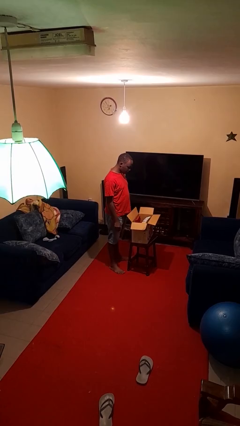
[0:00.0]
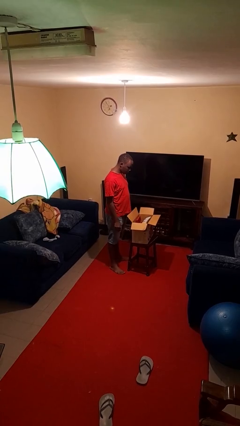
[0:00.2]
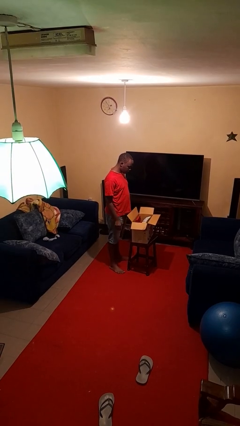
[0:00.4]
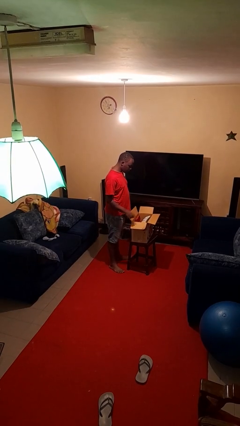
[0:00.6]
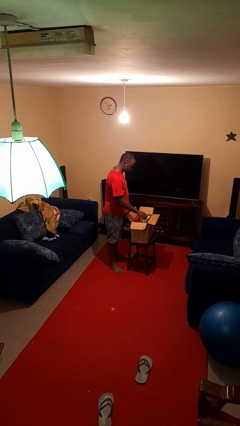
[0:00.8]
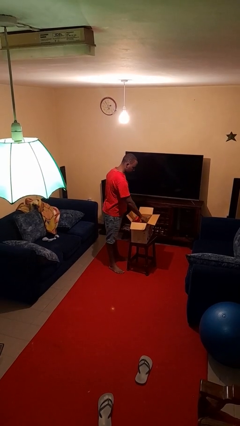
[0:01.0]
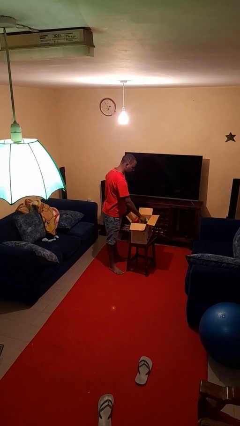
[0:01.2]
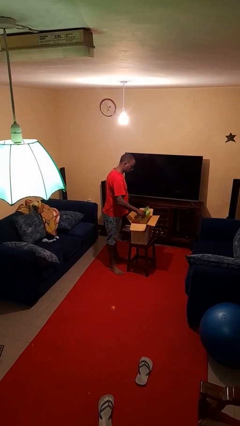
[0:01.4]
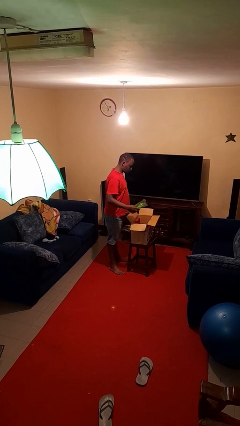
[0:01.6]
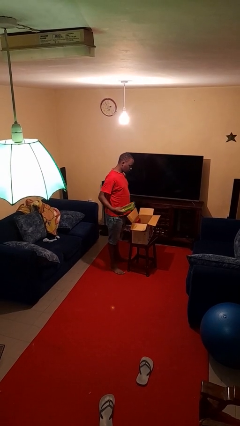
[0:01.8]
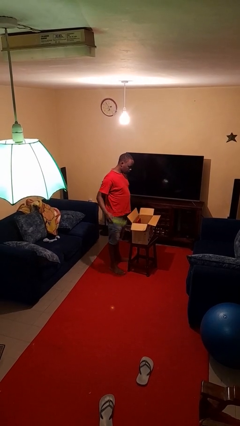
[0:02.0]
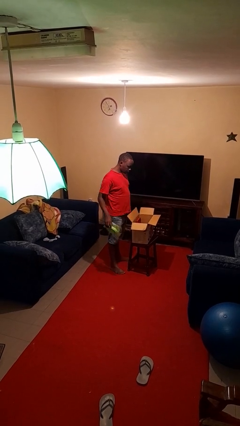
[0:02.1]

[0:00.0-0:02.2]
person takes object from box

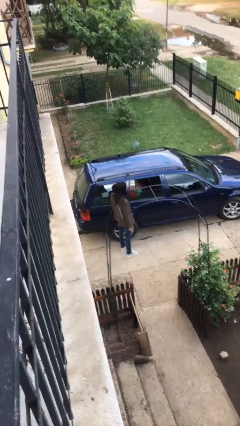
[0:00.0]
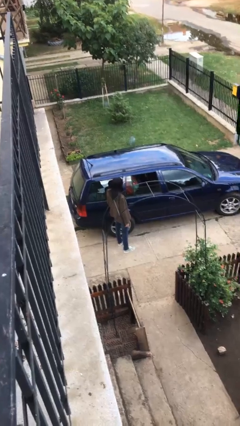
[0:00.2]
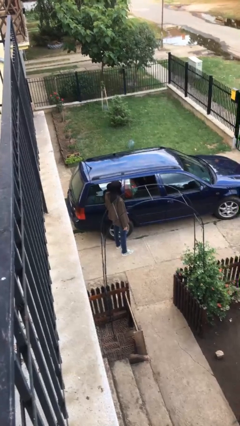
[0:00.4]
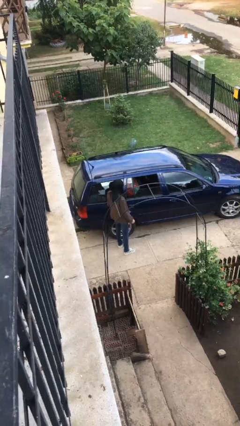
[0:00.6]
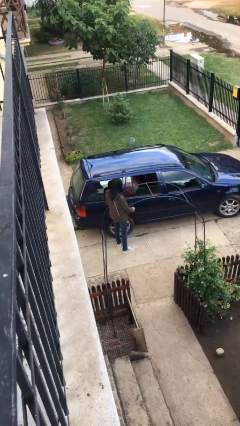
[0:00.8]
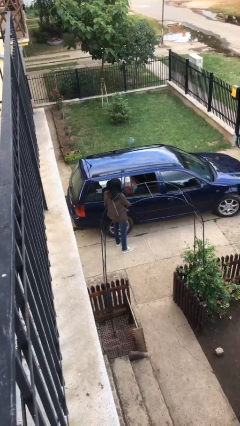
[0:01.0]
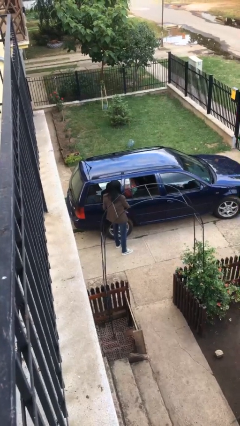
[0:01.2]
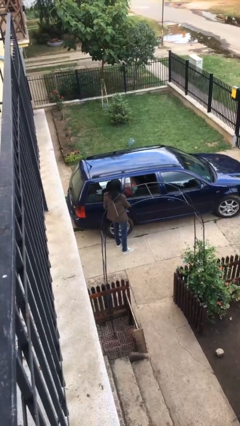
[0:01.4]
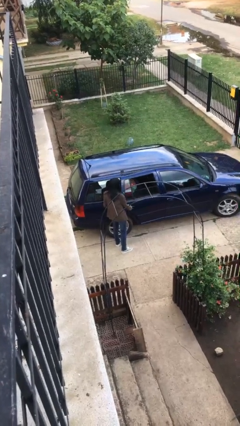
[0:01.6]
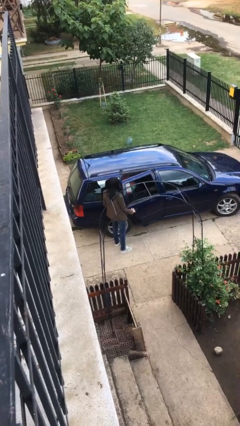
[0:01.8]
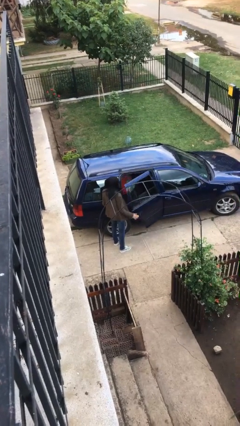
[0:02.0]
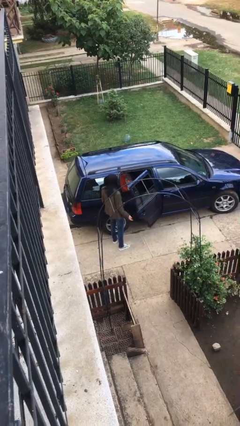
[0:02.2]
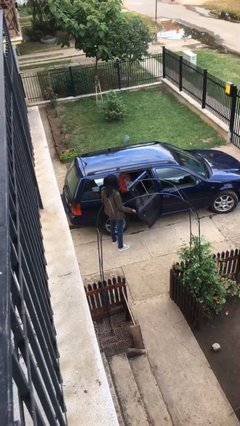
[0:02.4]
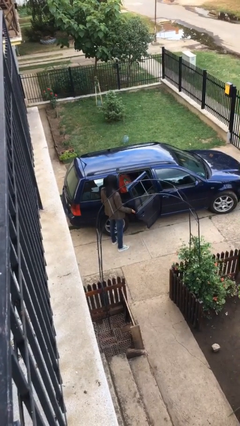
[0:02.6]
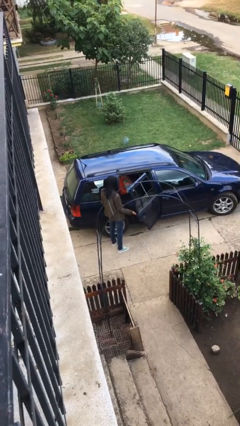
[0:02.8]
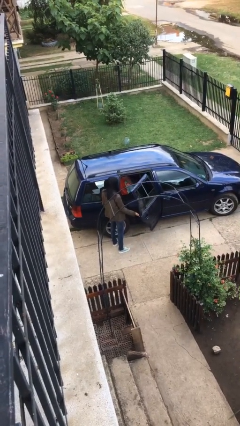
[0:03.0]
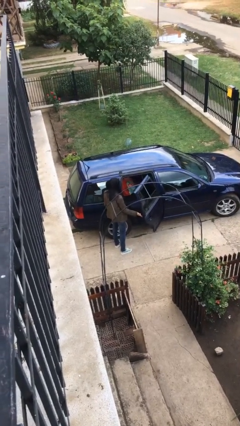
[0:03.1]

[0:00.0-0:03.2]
person opens car door

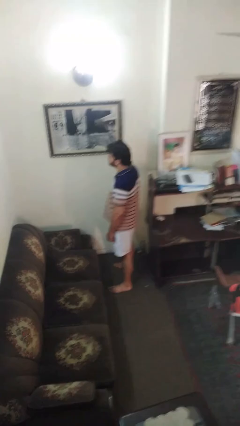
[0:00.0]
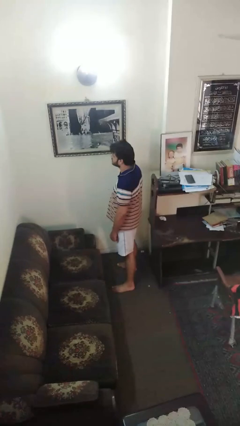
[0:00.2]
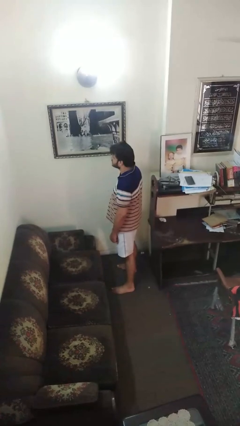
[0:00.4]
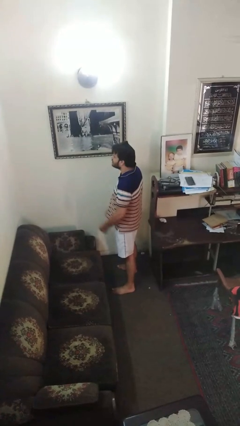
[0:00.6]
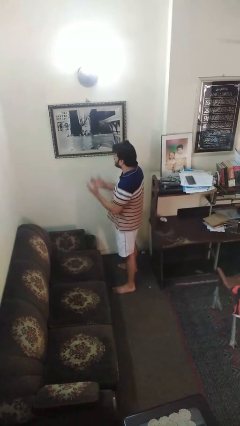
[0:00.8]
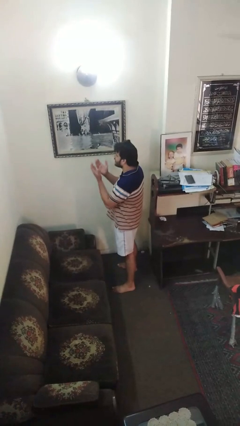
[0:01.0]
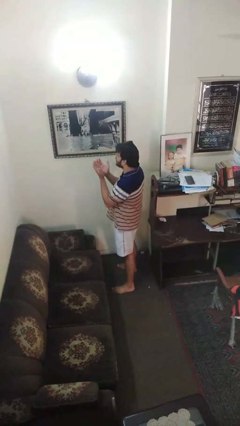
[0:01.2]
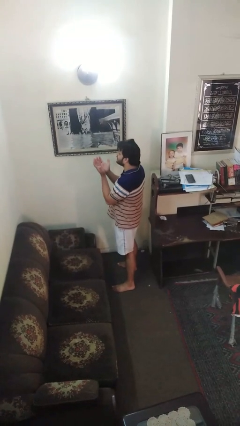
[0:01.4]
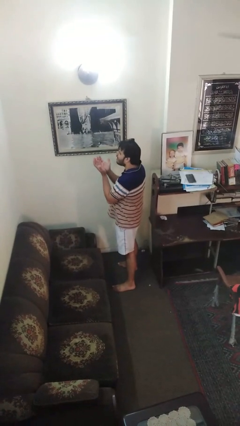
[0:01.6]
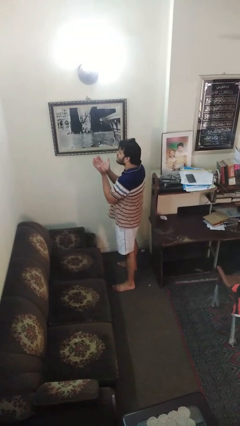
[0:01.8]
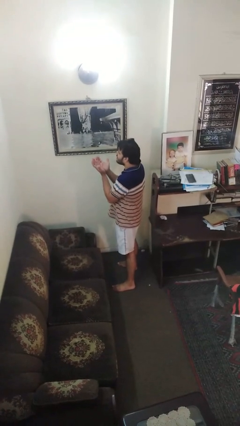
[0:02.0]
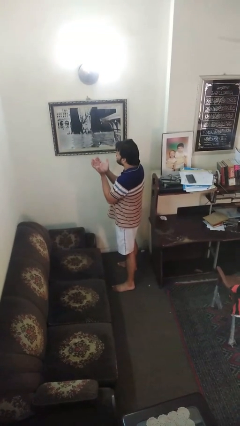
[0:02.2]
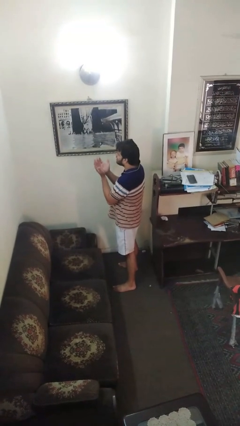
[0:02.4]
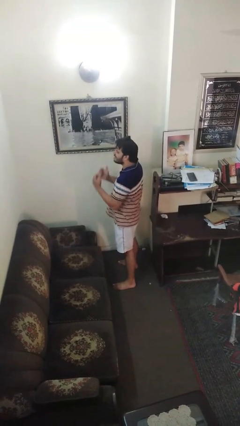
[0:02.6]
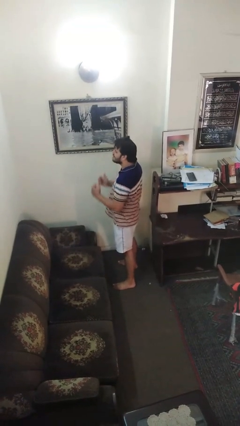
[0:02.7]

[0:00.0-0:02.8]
person prays

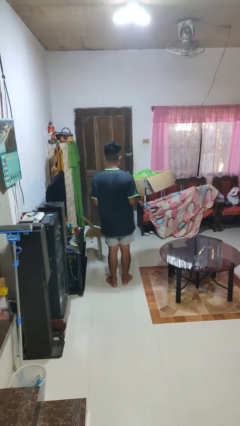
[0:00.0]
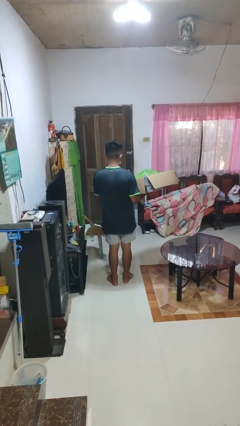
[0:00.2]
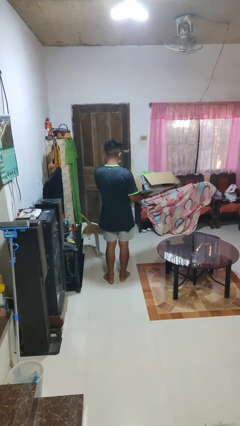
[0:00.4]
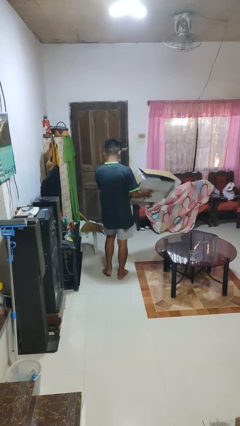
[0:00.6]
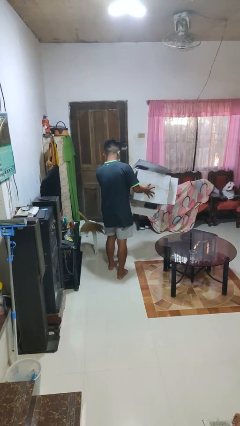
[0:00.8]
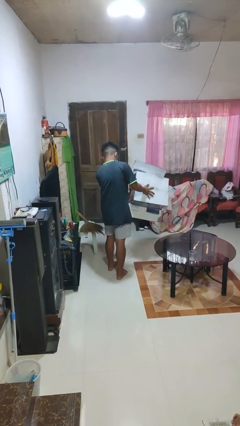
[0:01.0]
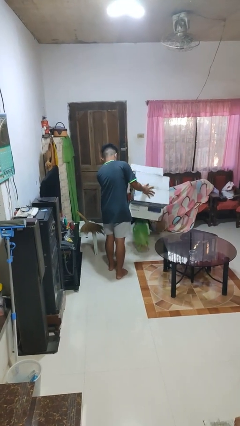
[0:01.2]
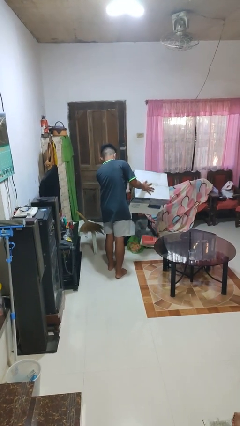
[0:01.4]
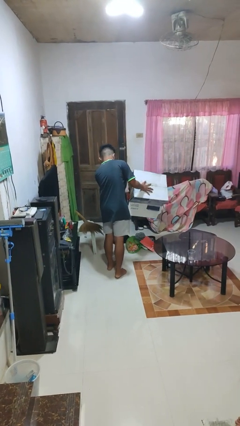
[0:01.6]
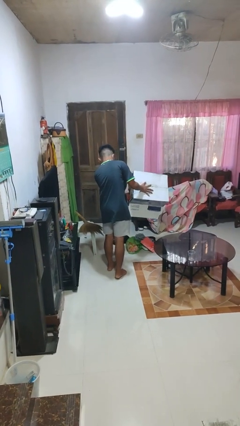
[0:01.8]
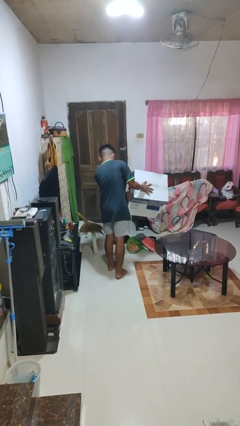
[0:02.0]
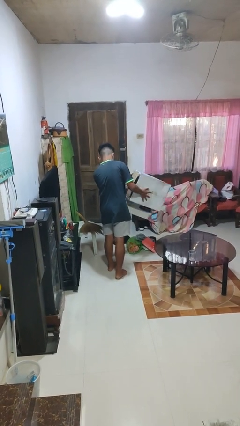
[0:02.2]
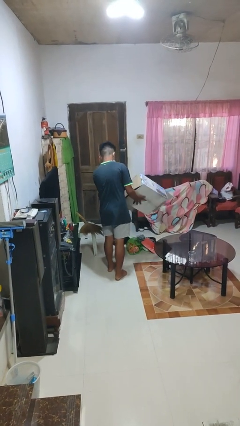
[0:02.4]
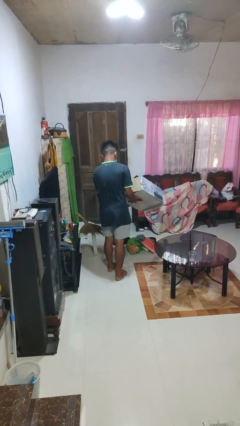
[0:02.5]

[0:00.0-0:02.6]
person unloads box onto floor

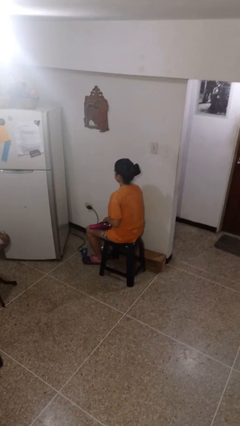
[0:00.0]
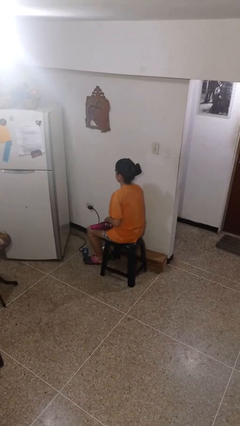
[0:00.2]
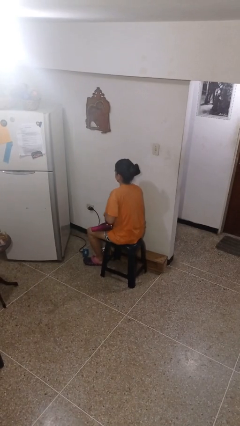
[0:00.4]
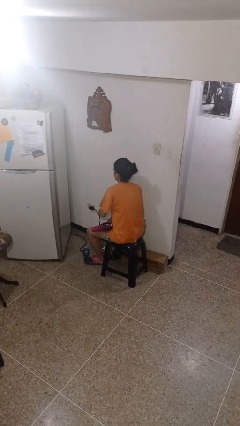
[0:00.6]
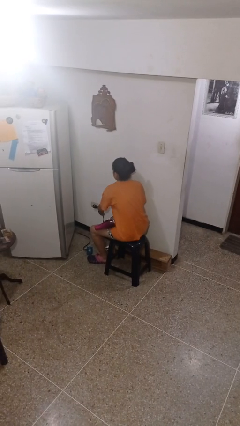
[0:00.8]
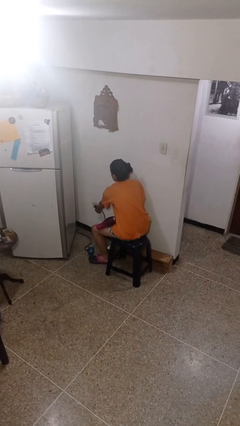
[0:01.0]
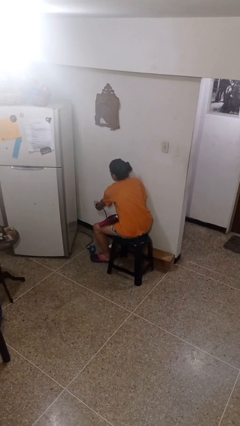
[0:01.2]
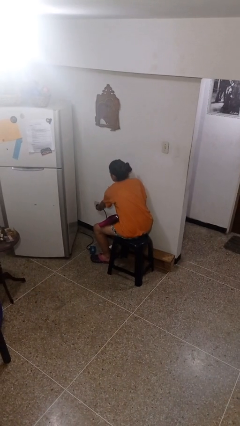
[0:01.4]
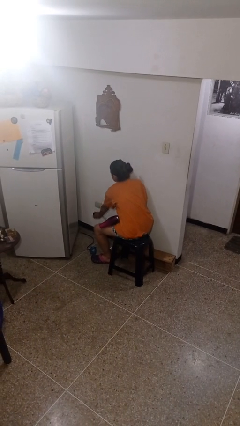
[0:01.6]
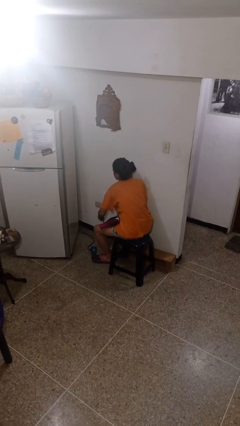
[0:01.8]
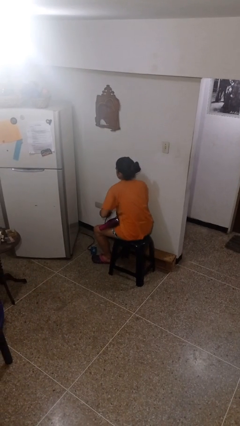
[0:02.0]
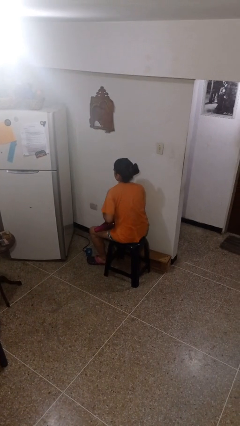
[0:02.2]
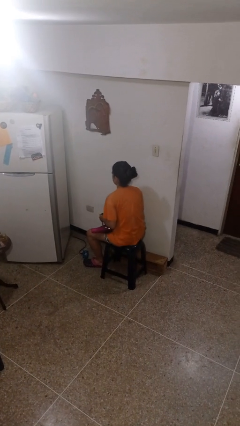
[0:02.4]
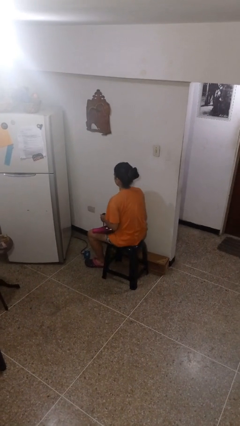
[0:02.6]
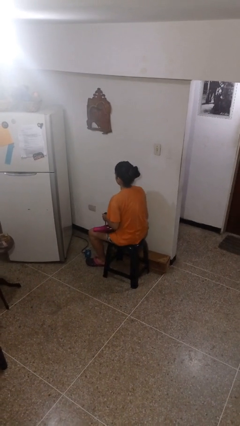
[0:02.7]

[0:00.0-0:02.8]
person unplugs from electrical socket

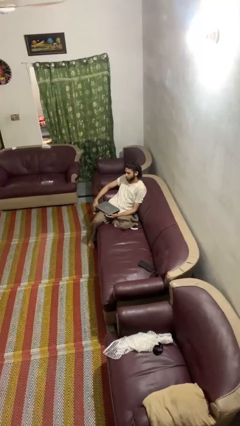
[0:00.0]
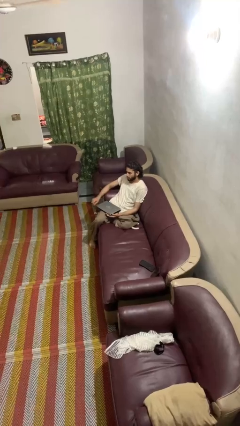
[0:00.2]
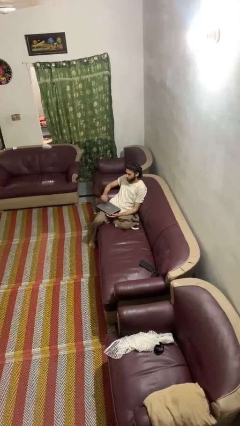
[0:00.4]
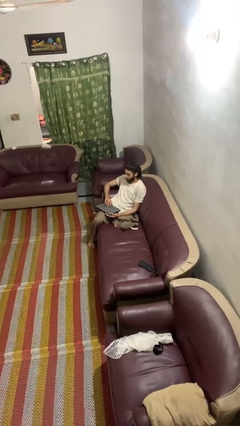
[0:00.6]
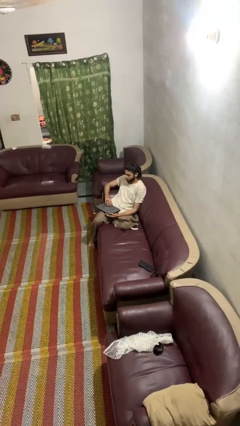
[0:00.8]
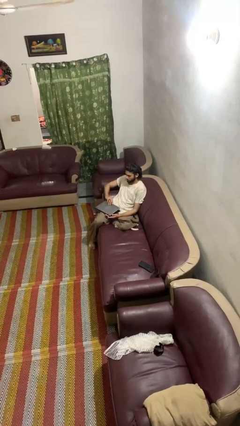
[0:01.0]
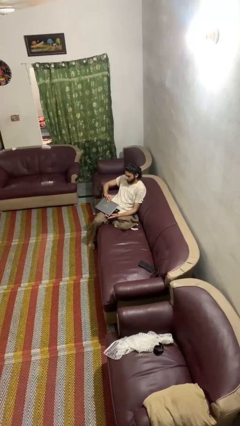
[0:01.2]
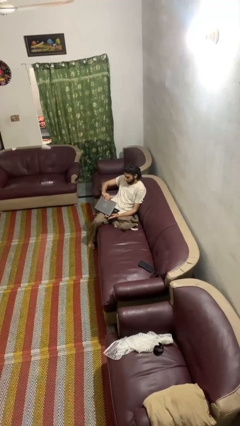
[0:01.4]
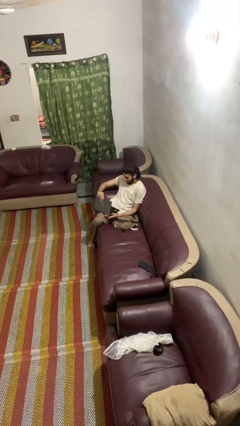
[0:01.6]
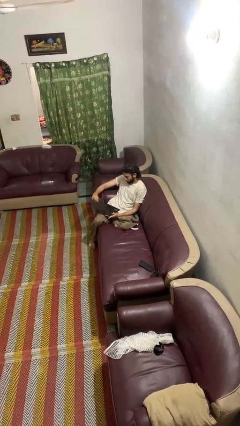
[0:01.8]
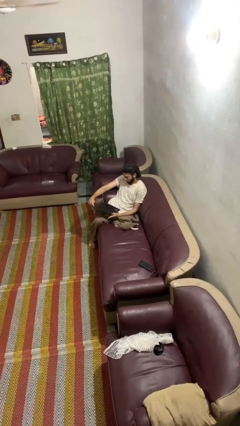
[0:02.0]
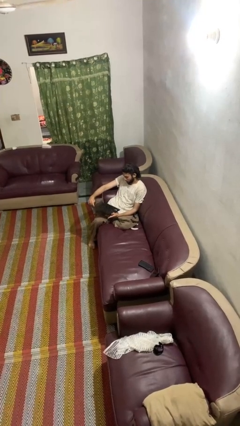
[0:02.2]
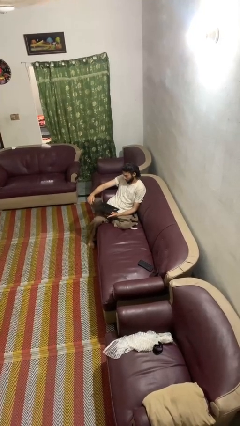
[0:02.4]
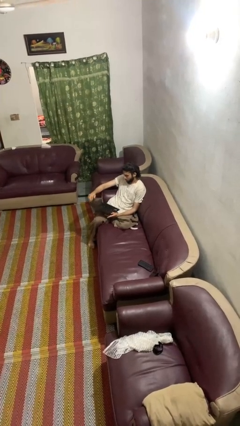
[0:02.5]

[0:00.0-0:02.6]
person opens laptop

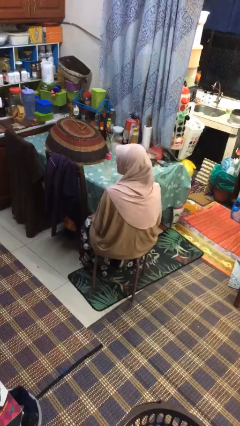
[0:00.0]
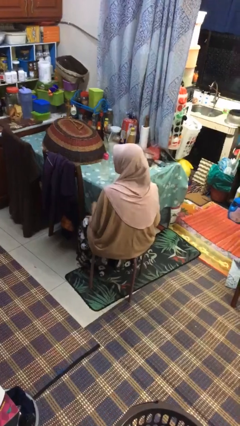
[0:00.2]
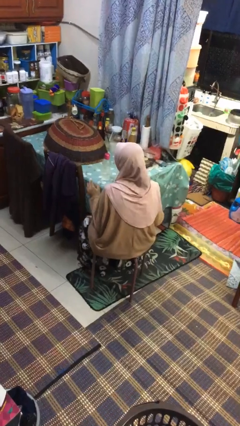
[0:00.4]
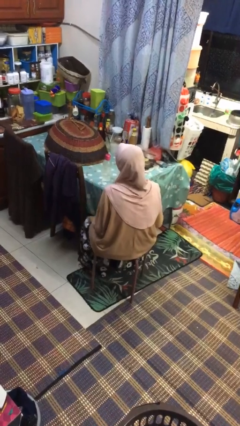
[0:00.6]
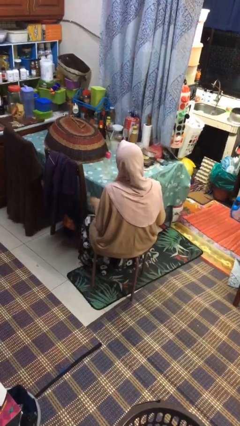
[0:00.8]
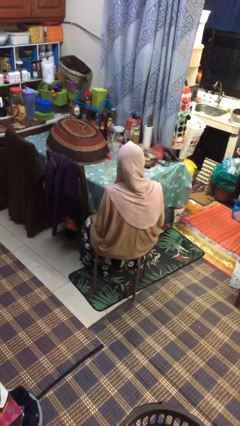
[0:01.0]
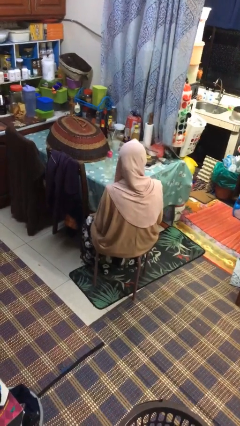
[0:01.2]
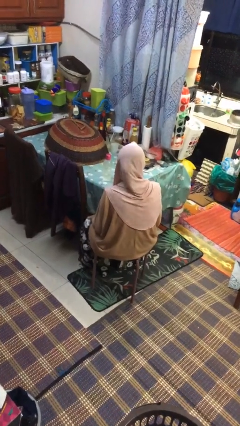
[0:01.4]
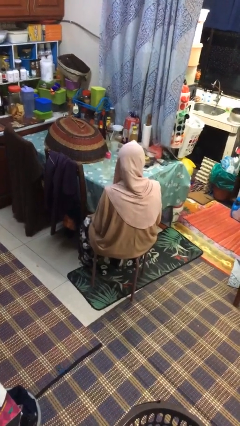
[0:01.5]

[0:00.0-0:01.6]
person slaps hands on thighs
